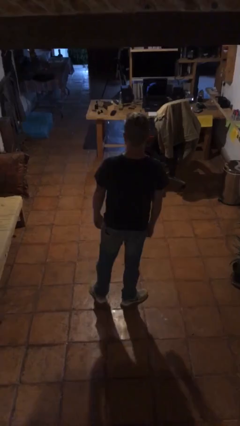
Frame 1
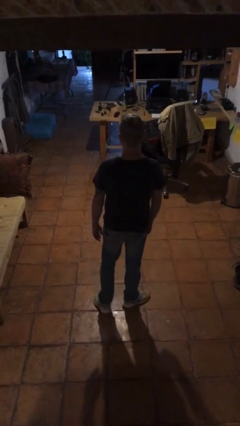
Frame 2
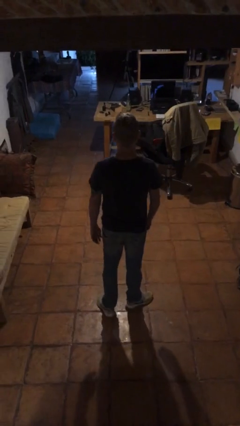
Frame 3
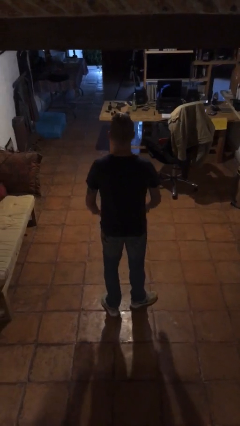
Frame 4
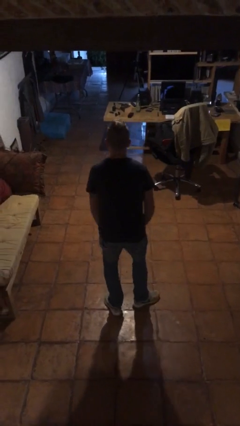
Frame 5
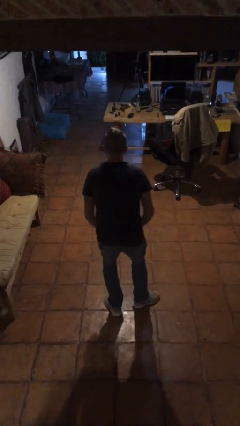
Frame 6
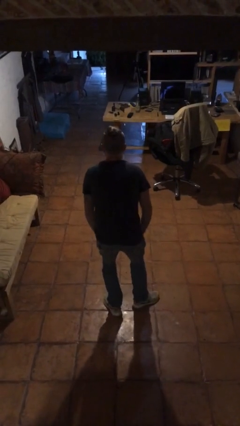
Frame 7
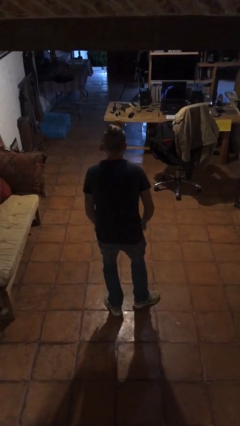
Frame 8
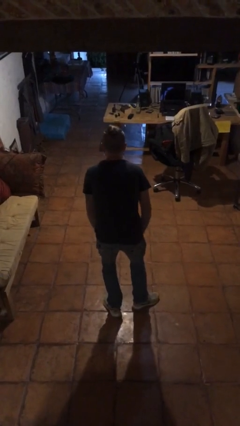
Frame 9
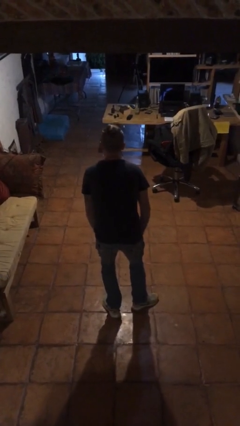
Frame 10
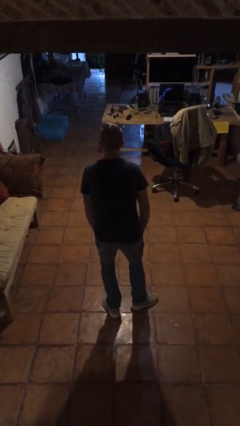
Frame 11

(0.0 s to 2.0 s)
person slaps hands on thighs

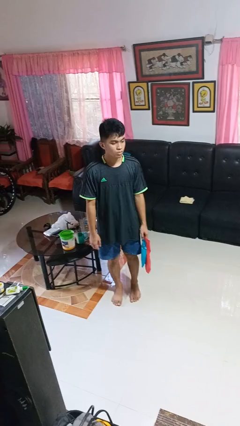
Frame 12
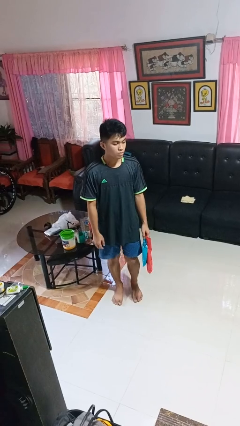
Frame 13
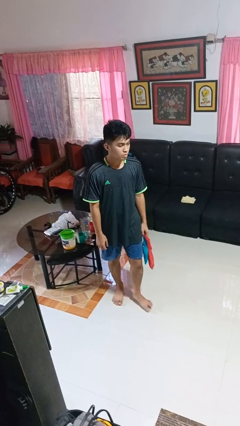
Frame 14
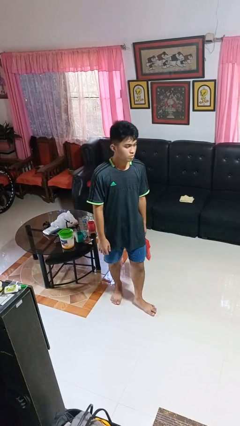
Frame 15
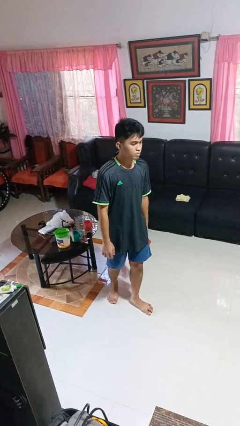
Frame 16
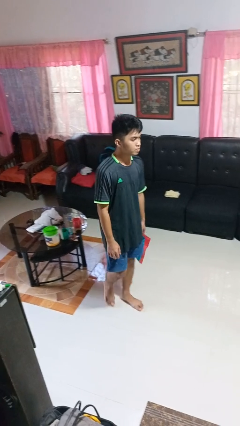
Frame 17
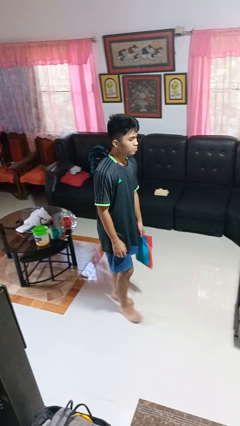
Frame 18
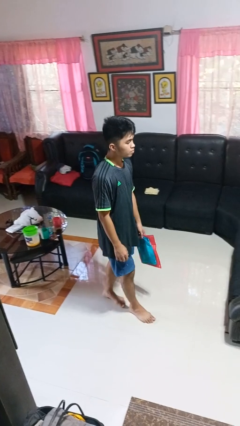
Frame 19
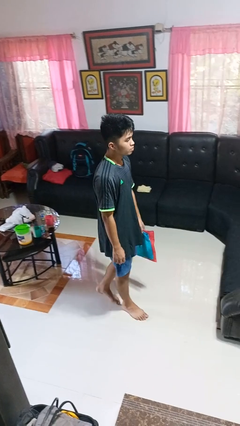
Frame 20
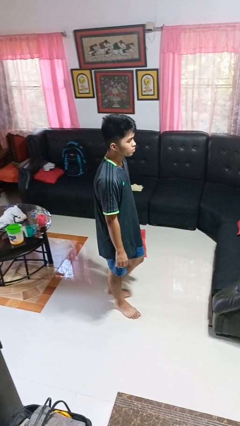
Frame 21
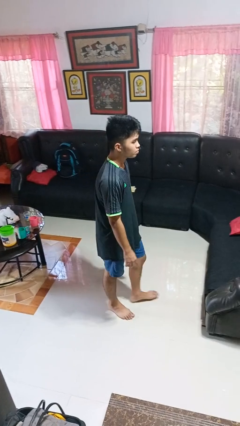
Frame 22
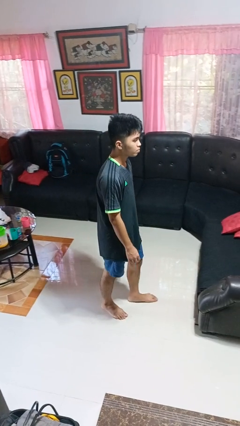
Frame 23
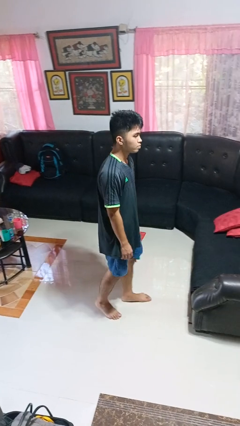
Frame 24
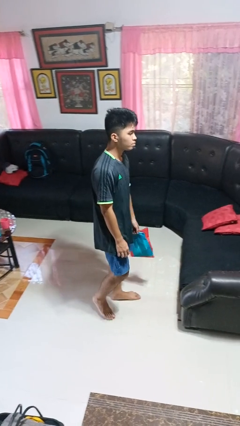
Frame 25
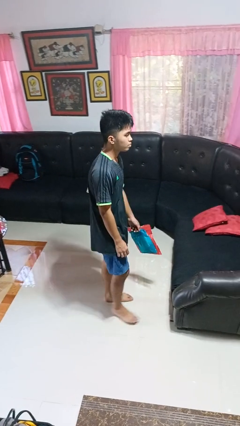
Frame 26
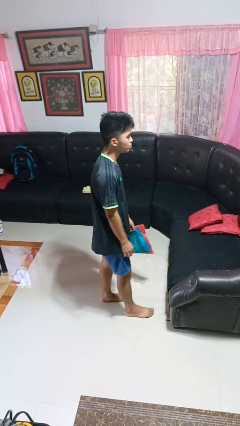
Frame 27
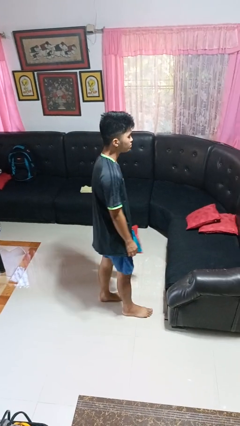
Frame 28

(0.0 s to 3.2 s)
person carries groceries

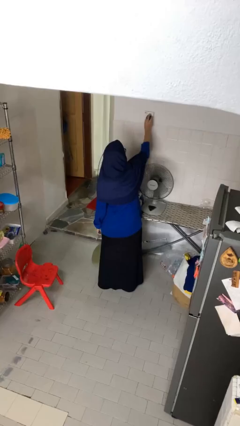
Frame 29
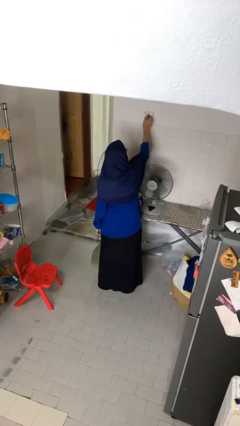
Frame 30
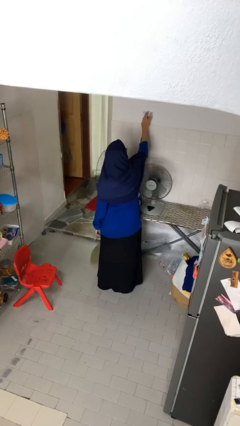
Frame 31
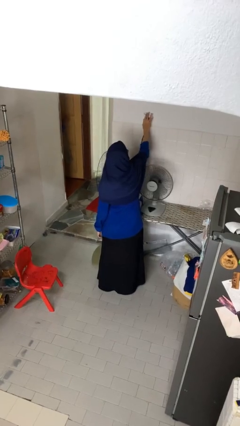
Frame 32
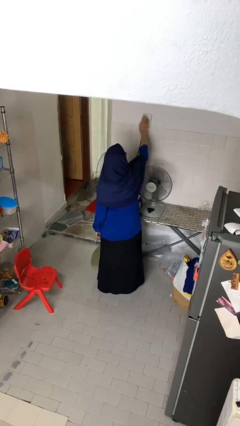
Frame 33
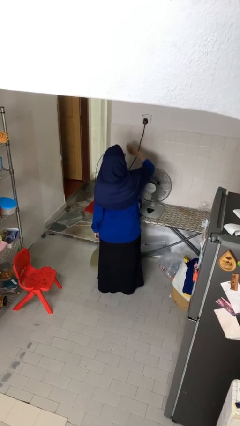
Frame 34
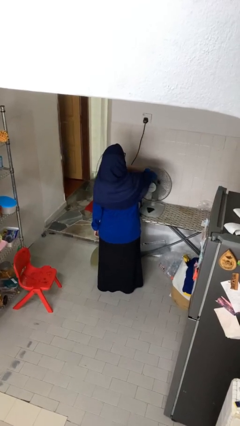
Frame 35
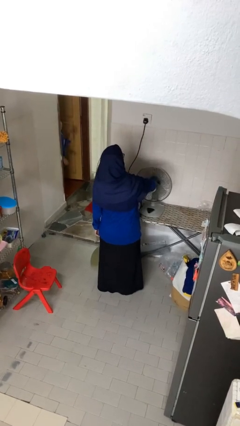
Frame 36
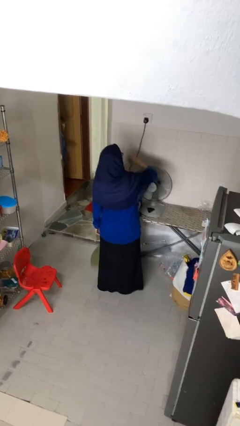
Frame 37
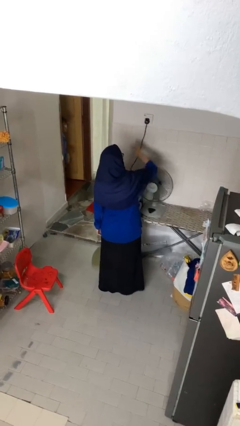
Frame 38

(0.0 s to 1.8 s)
person plugs into electrical socket

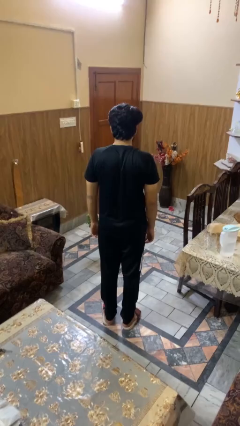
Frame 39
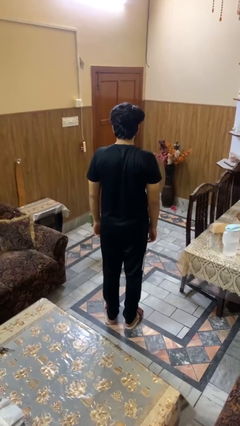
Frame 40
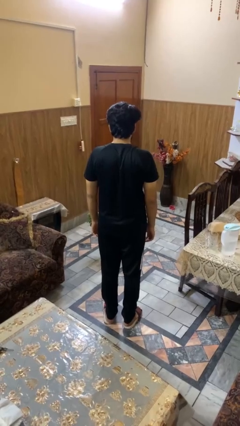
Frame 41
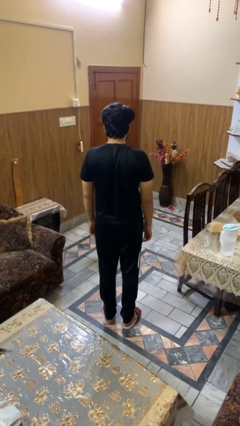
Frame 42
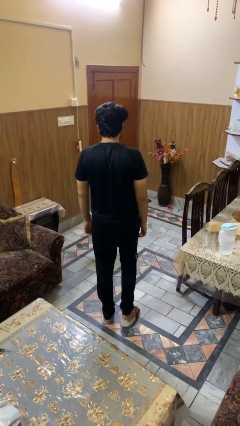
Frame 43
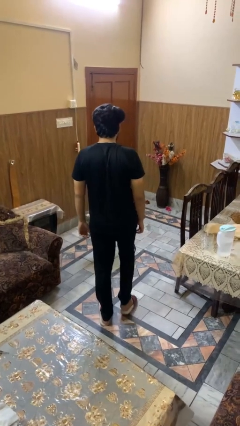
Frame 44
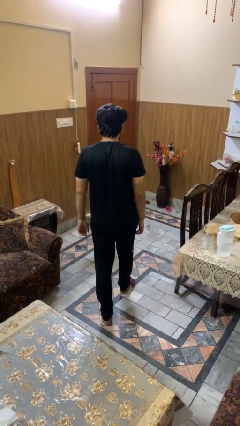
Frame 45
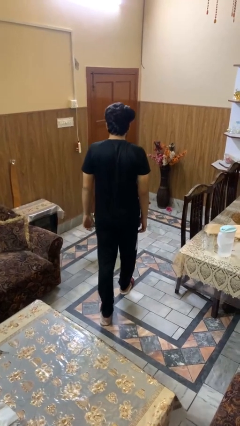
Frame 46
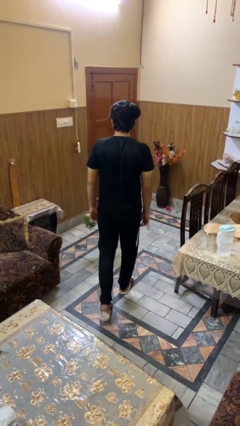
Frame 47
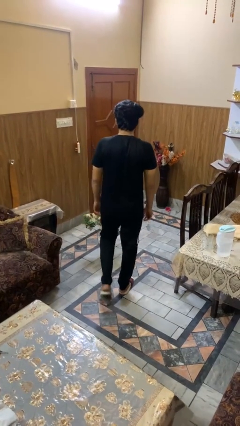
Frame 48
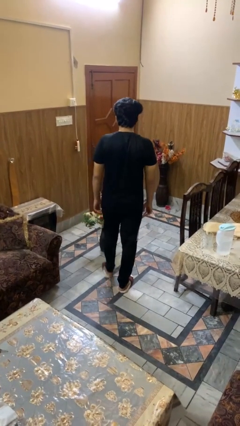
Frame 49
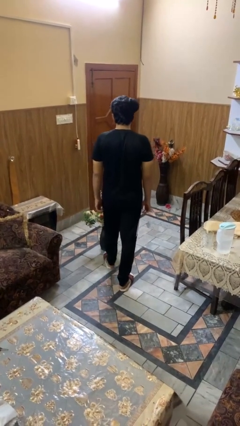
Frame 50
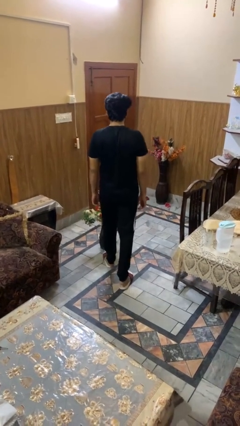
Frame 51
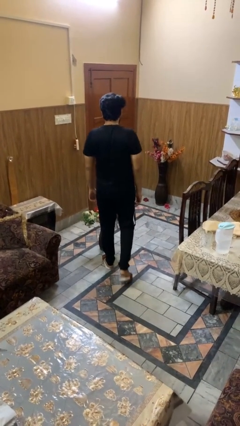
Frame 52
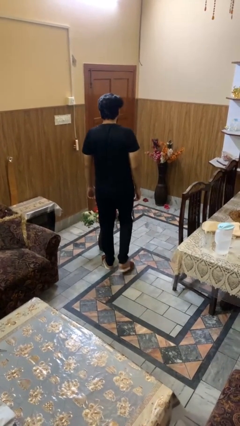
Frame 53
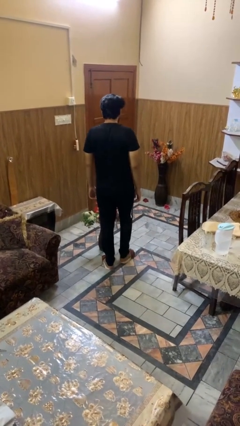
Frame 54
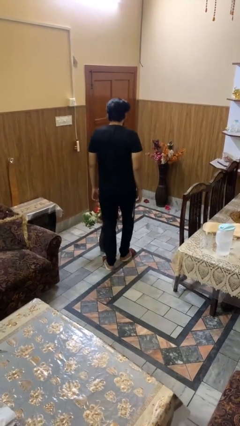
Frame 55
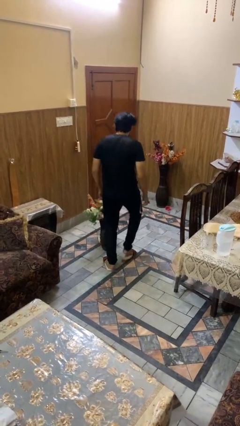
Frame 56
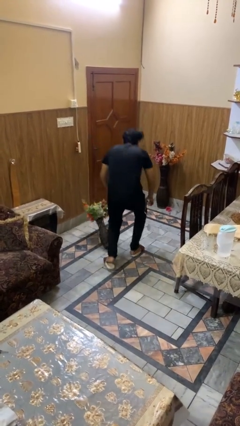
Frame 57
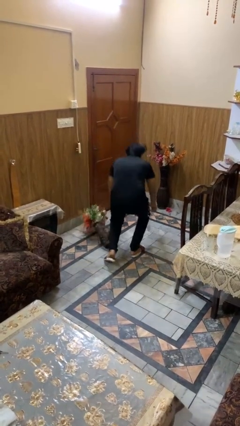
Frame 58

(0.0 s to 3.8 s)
person trips on object on floor

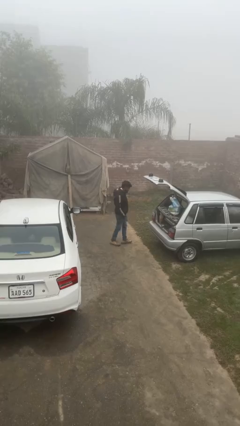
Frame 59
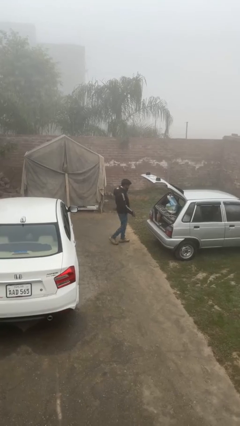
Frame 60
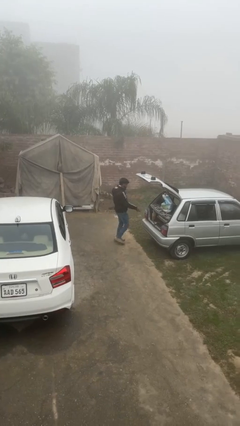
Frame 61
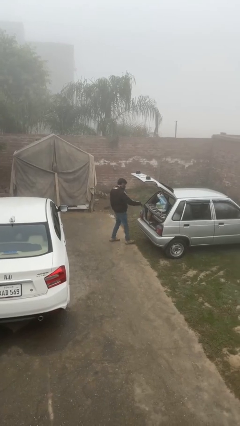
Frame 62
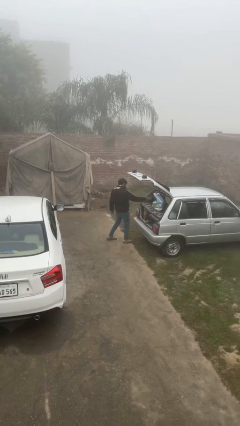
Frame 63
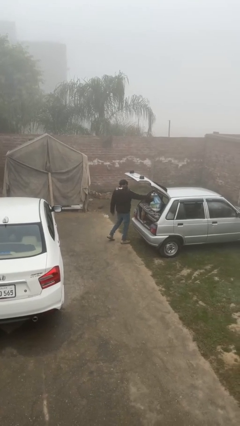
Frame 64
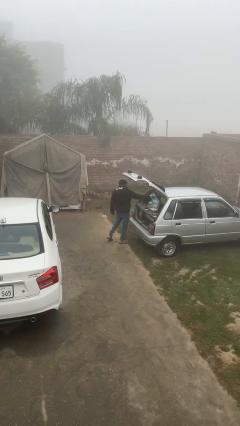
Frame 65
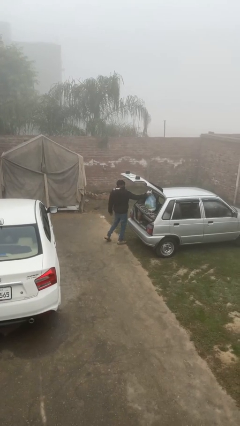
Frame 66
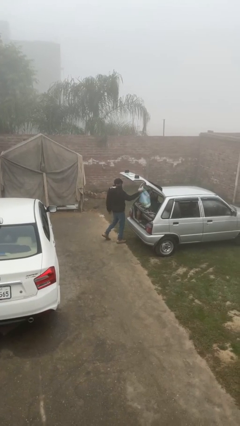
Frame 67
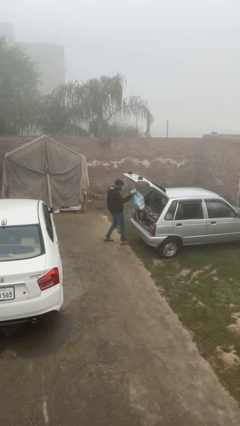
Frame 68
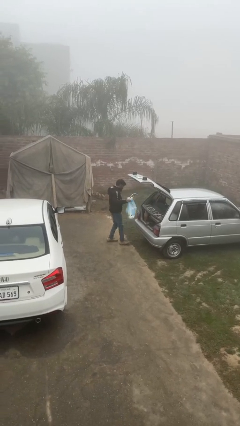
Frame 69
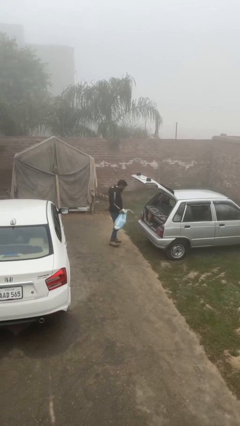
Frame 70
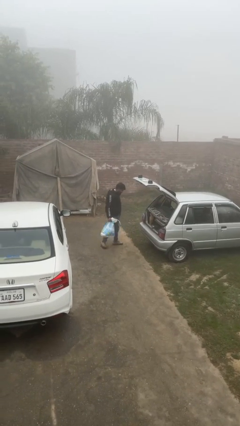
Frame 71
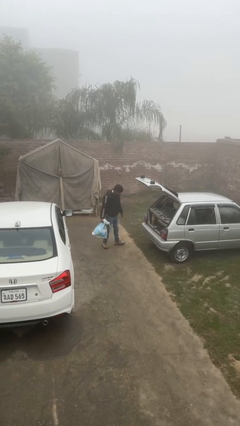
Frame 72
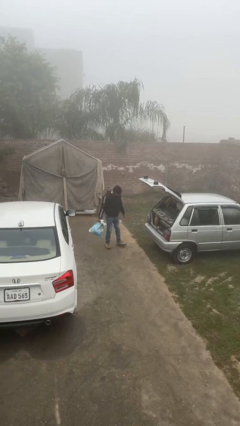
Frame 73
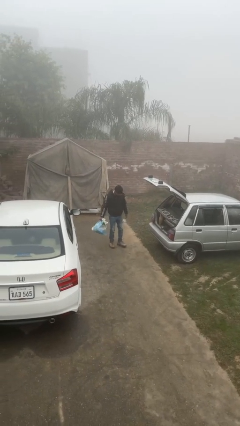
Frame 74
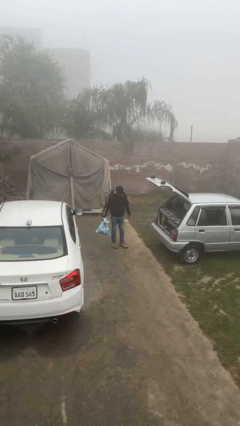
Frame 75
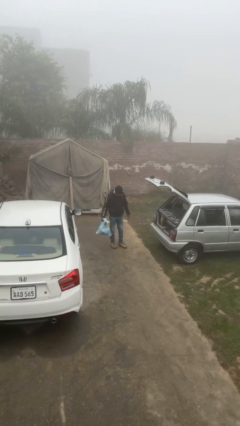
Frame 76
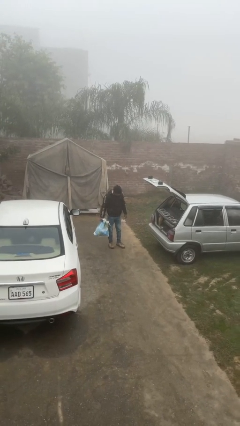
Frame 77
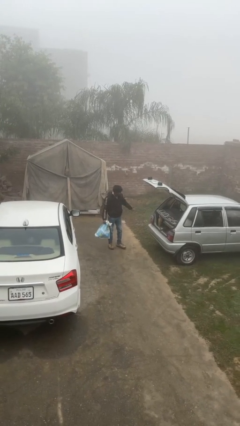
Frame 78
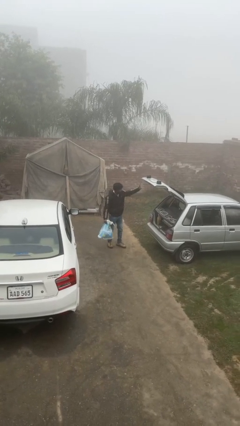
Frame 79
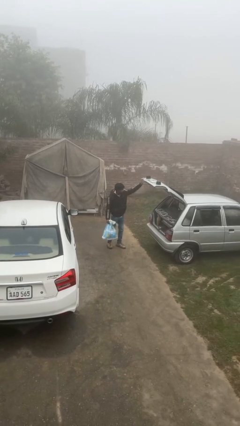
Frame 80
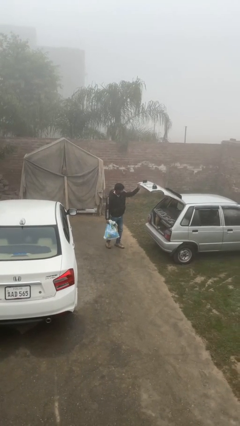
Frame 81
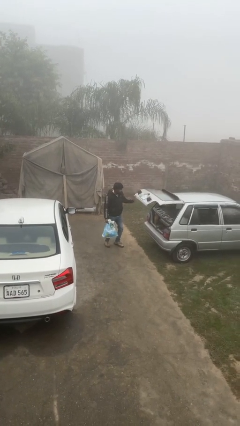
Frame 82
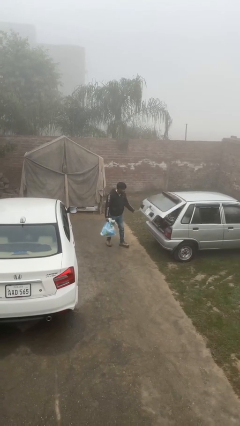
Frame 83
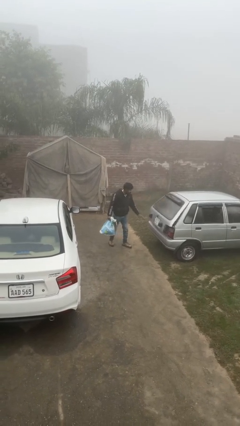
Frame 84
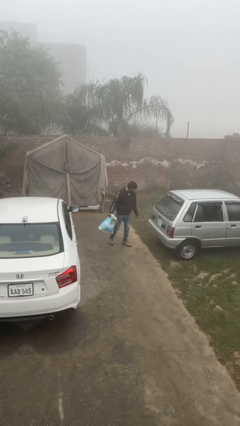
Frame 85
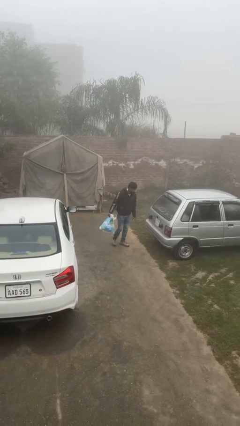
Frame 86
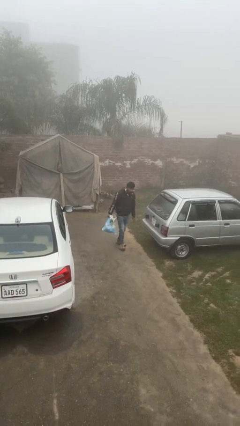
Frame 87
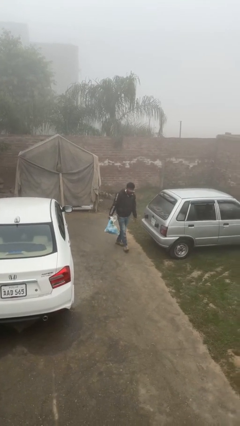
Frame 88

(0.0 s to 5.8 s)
person unloads car

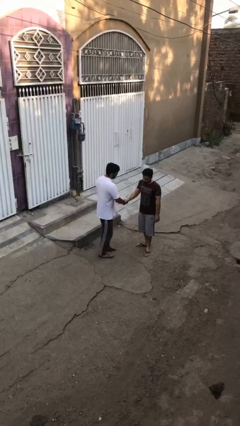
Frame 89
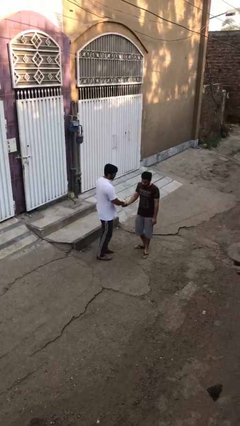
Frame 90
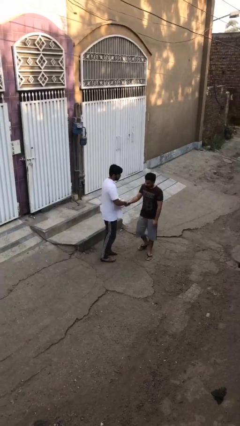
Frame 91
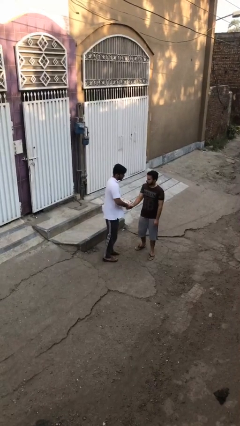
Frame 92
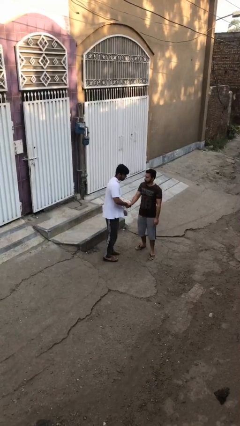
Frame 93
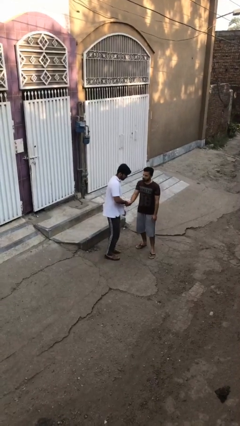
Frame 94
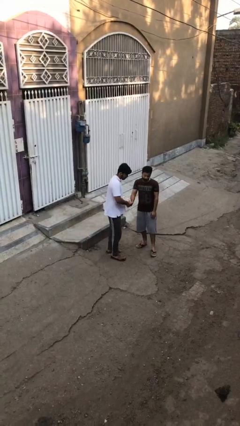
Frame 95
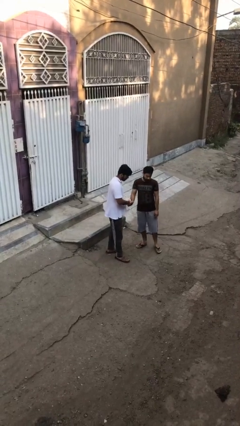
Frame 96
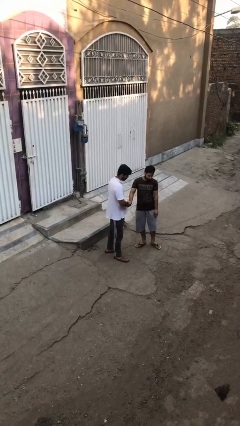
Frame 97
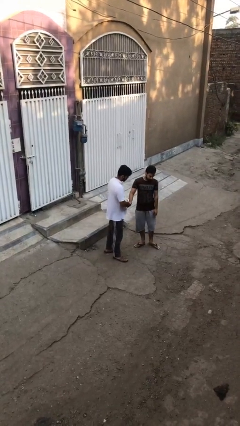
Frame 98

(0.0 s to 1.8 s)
person shakes hand
